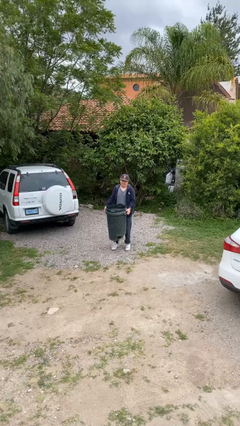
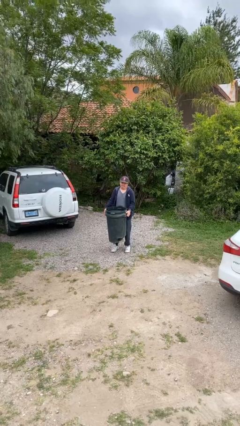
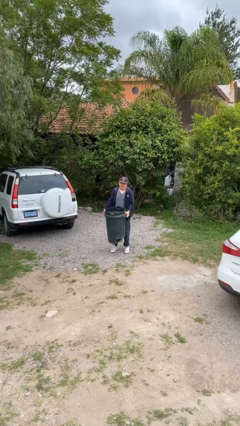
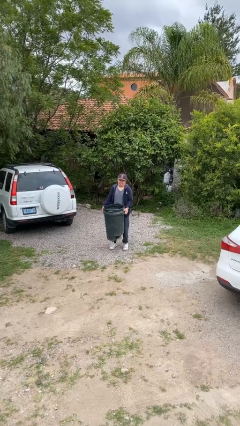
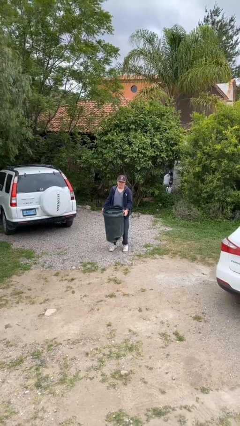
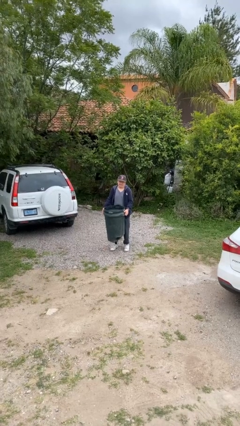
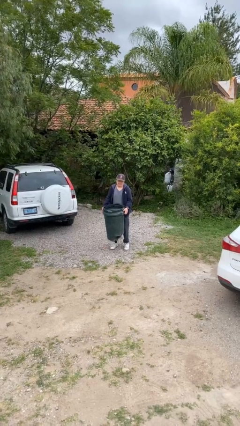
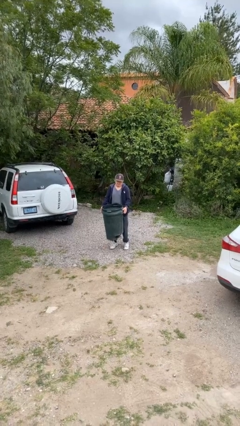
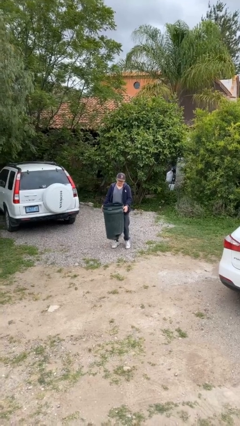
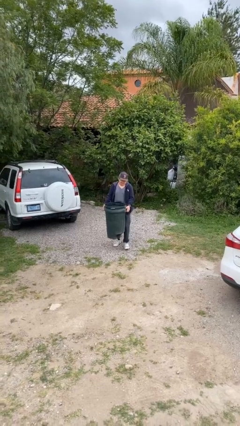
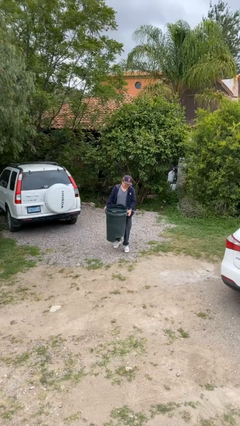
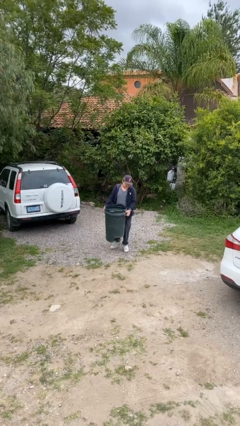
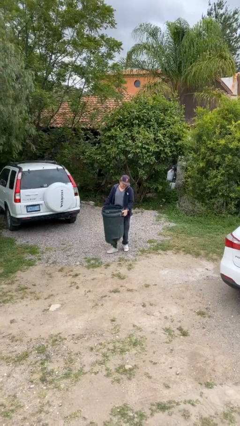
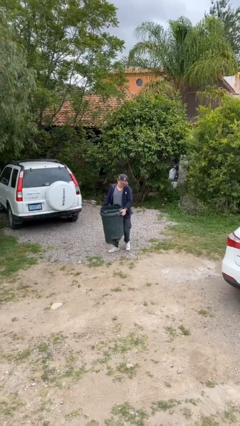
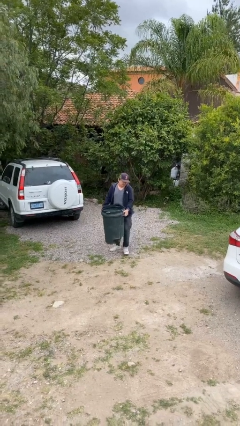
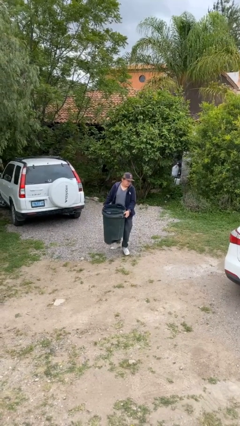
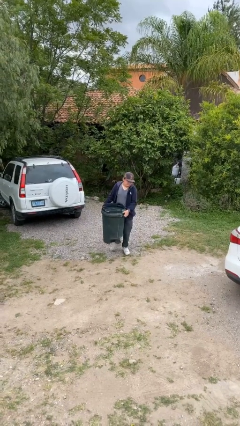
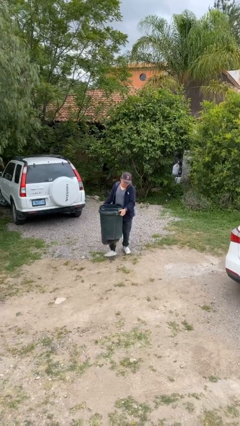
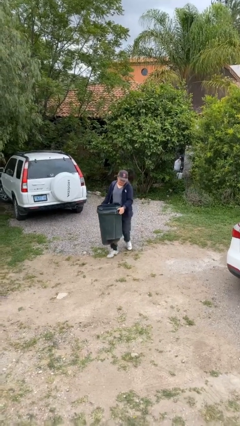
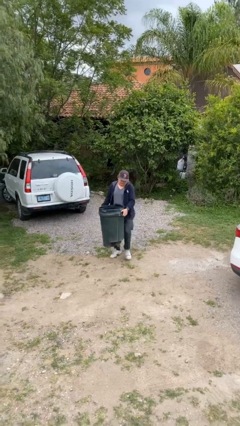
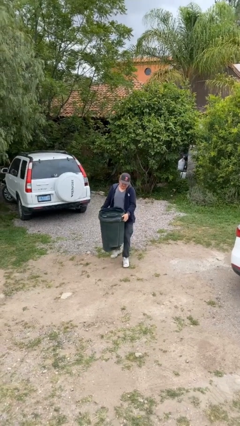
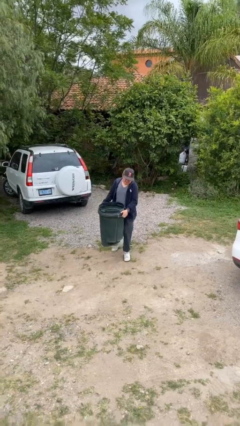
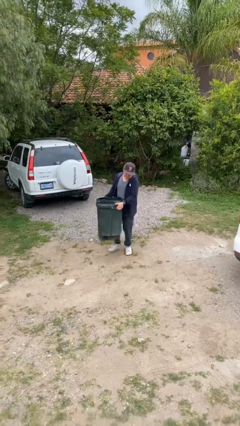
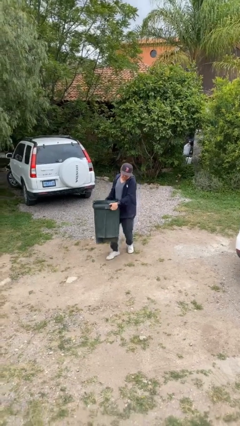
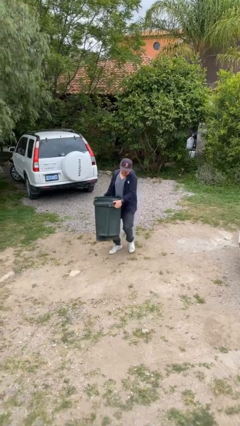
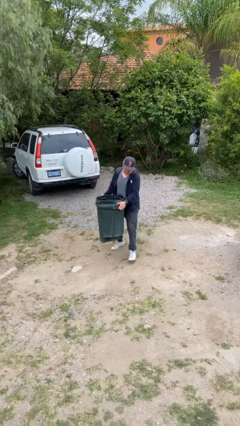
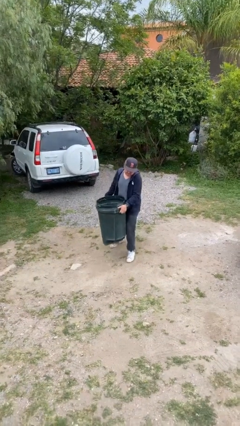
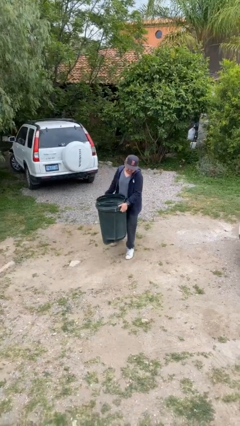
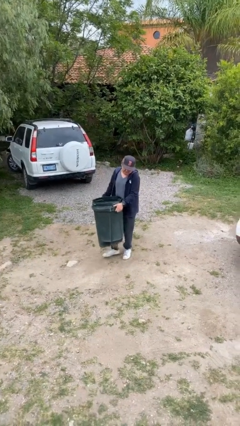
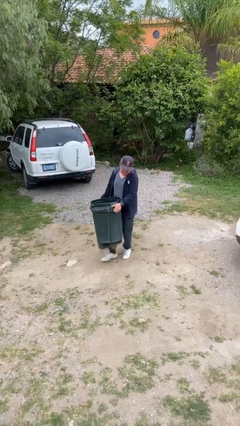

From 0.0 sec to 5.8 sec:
person carries heavy object

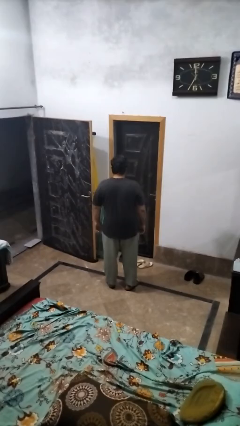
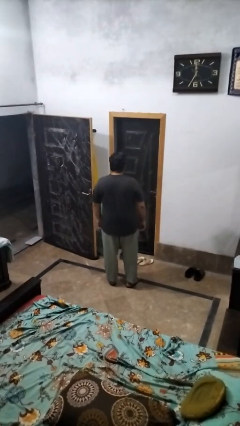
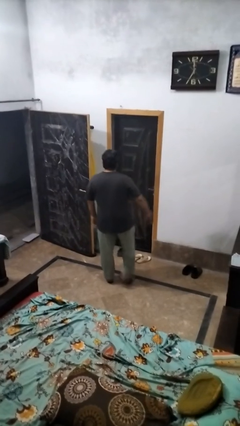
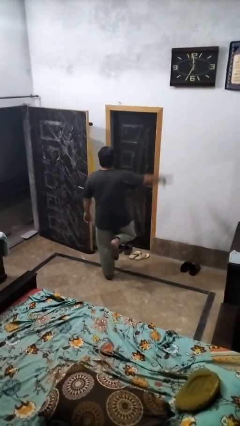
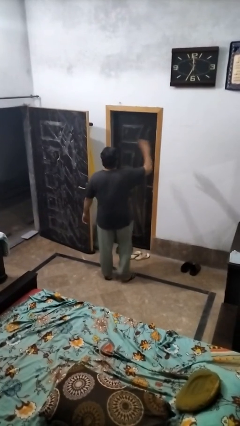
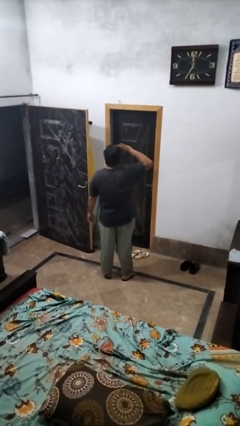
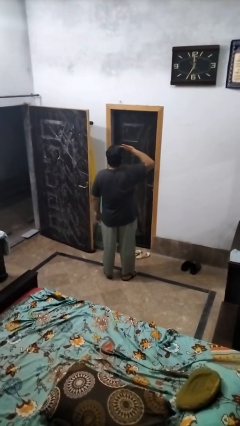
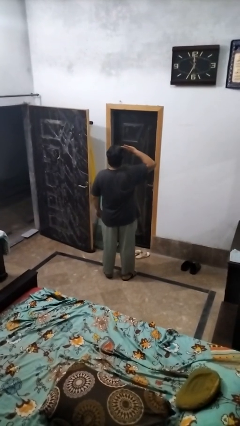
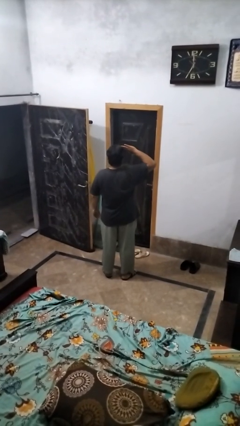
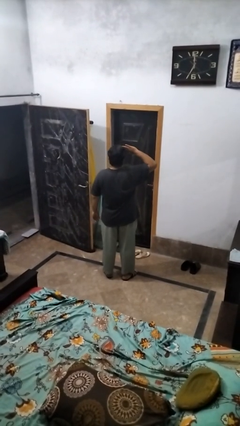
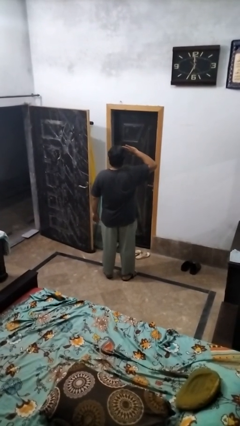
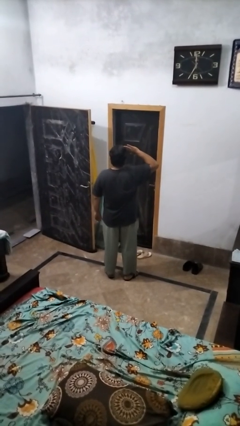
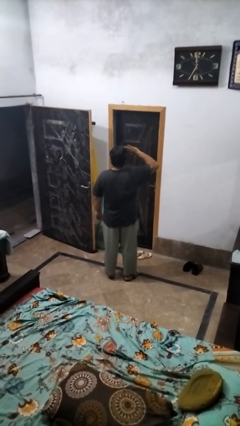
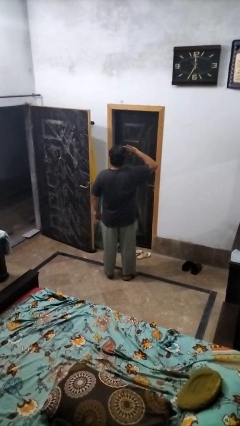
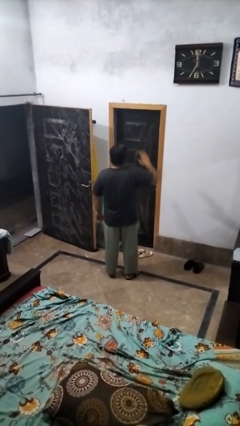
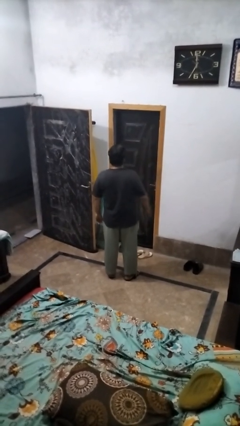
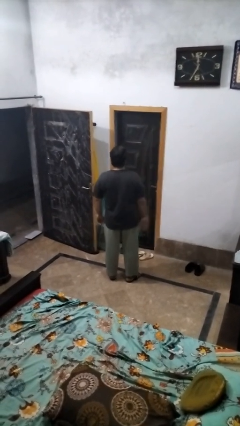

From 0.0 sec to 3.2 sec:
person salutes

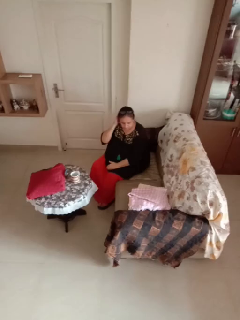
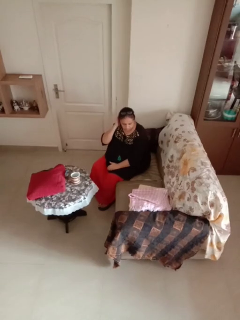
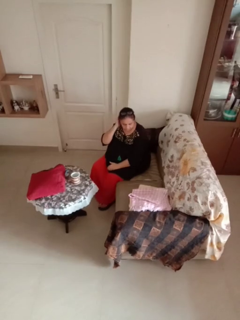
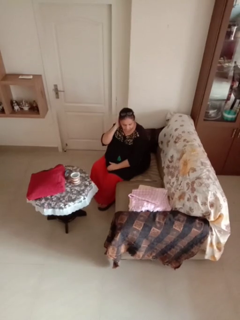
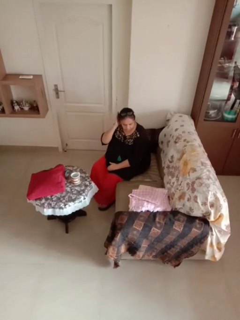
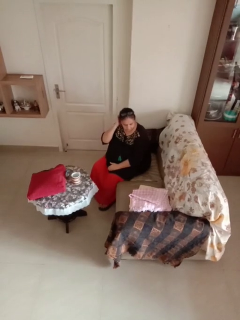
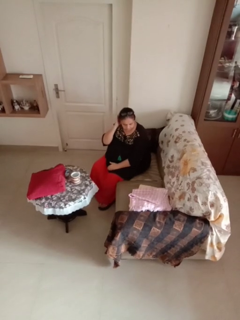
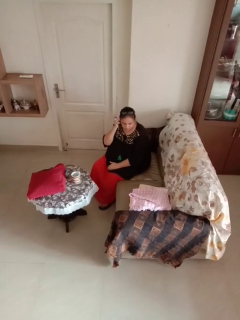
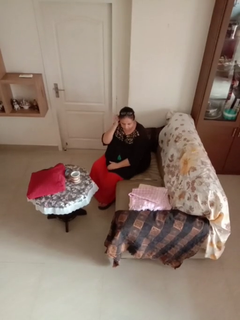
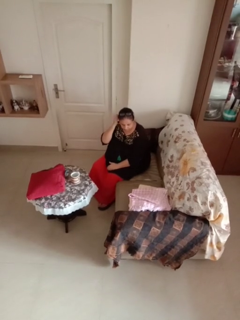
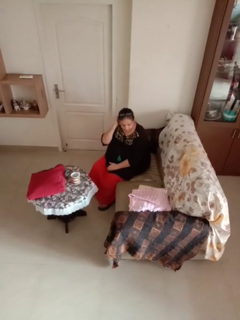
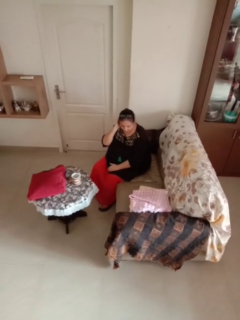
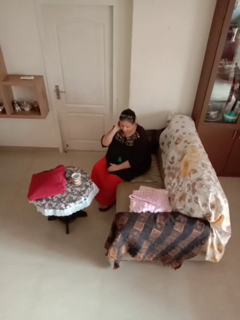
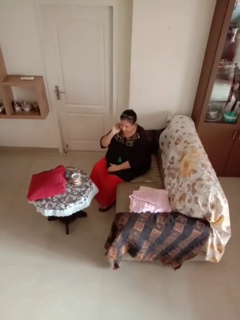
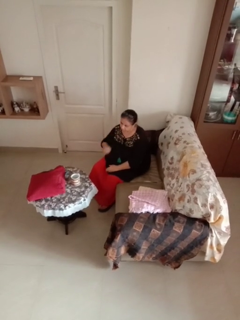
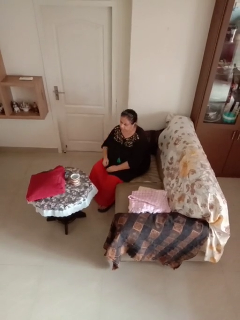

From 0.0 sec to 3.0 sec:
person strokes hair

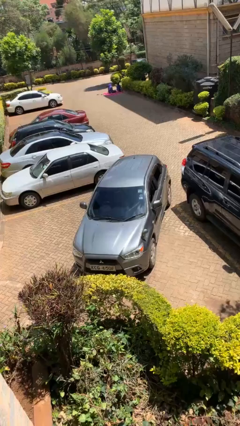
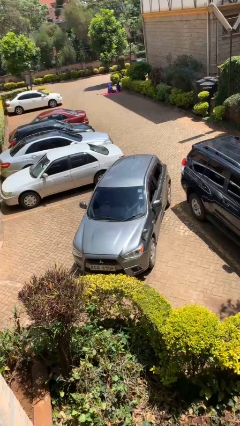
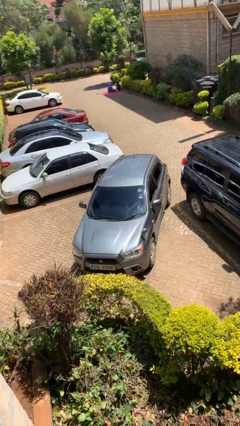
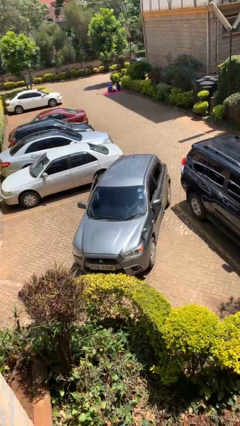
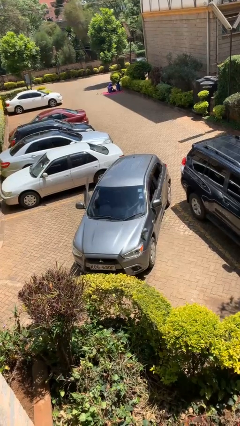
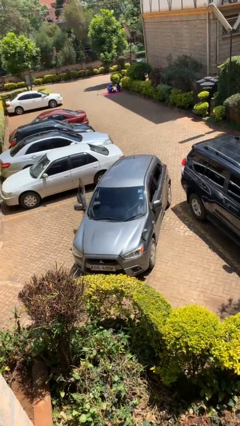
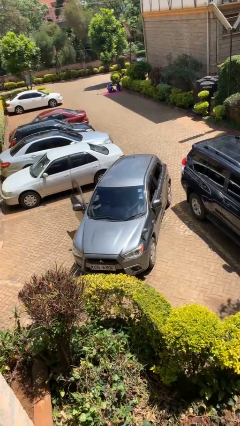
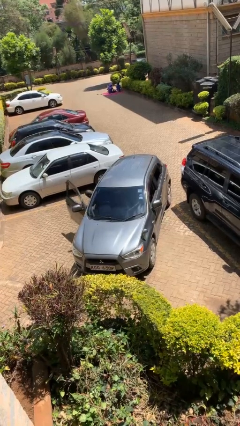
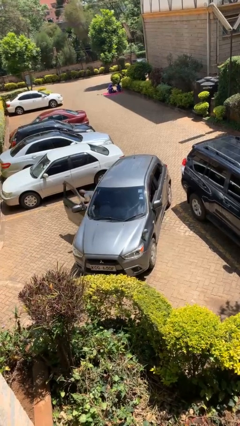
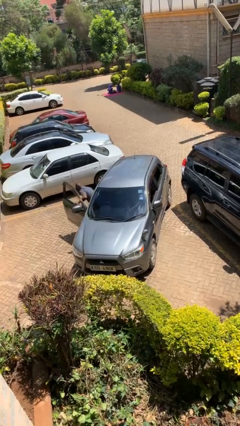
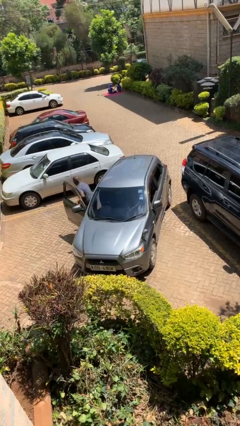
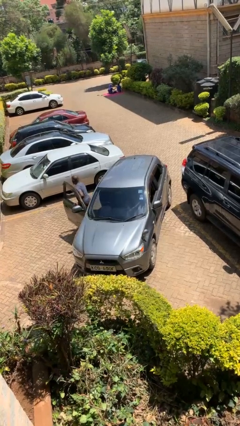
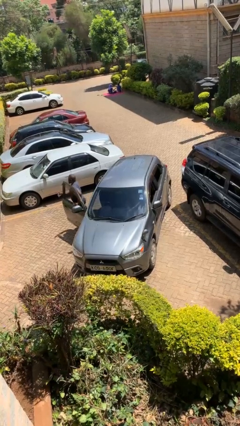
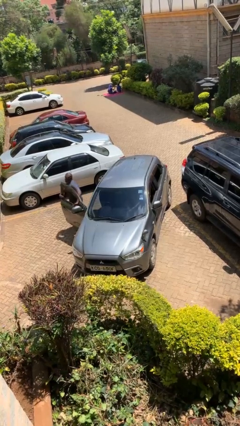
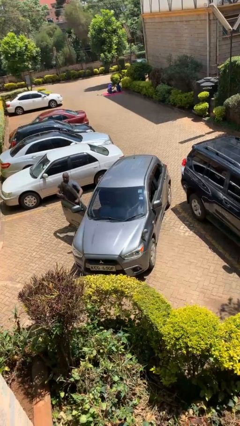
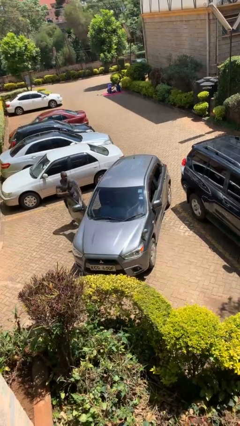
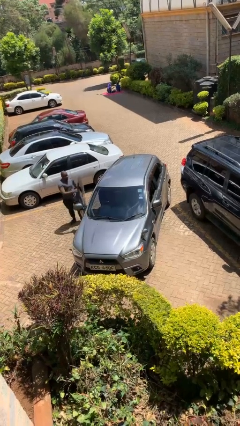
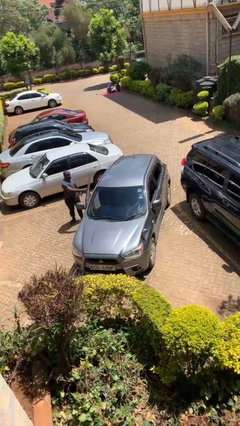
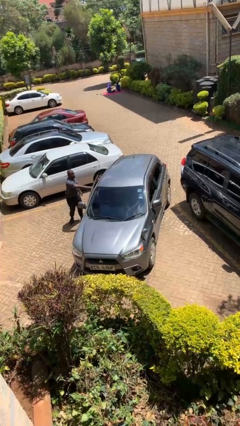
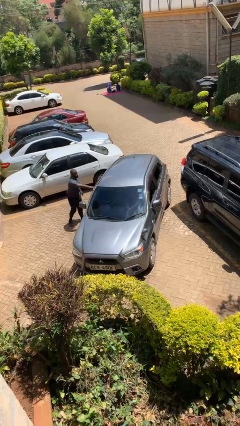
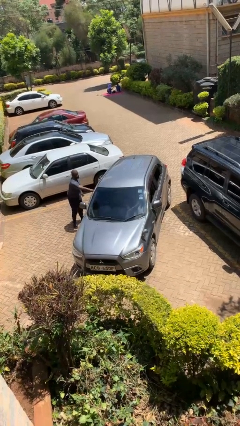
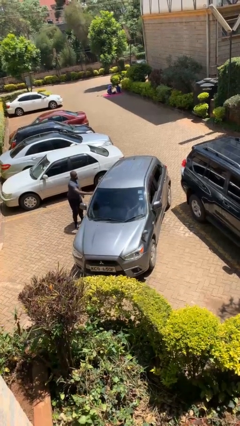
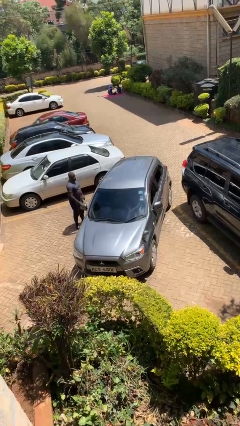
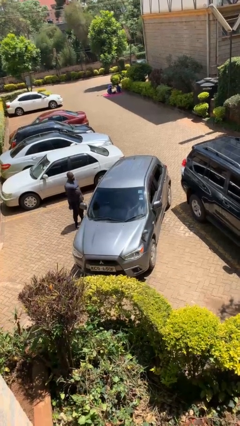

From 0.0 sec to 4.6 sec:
car drops off person

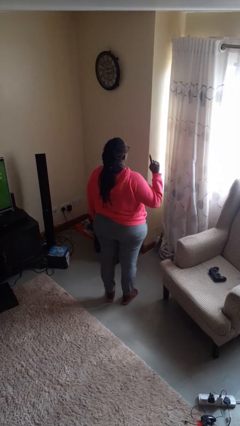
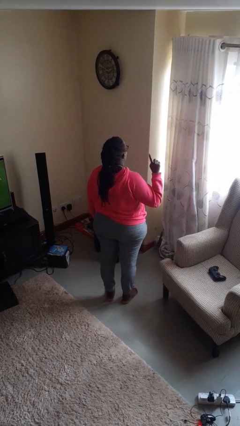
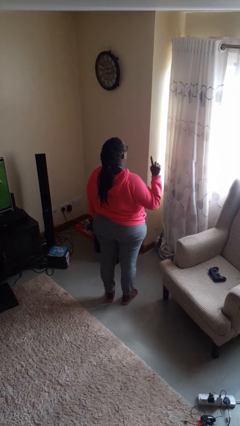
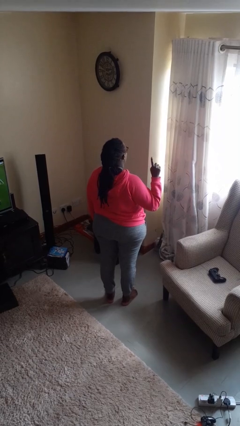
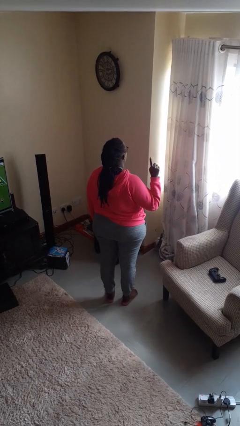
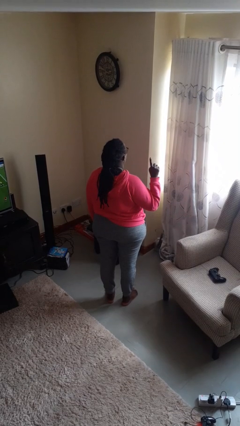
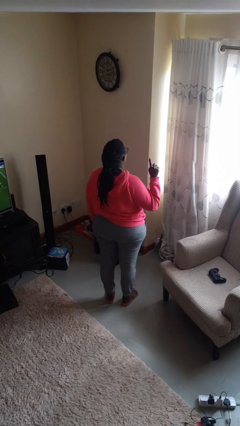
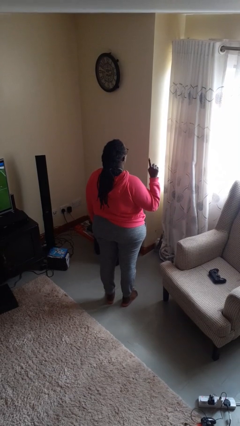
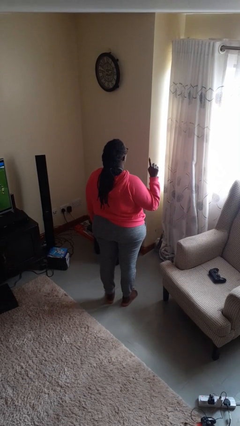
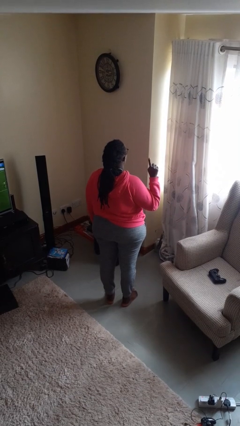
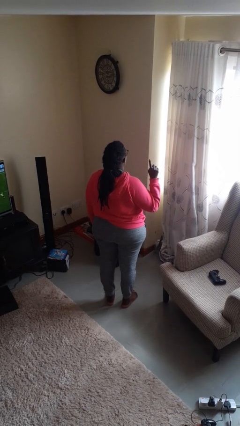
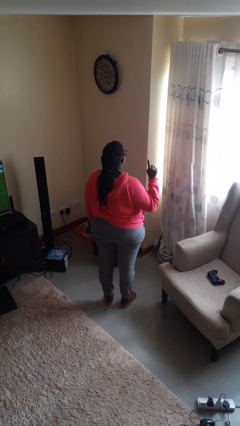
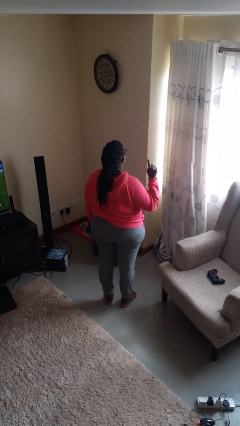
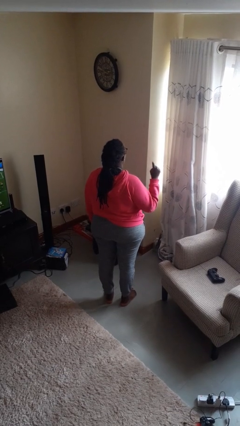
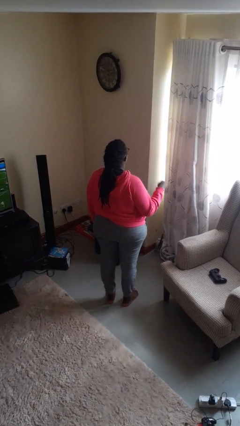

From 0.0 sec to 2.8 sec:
person gestures number one
